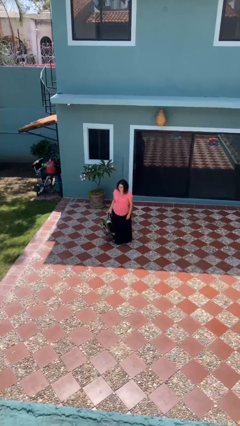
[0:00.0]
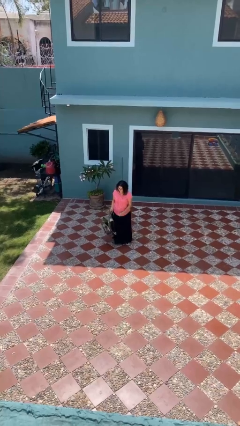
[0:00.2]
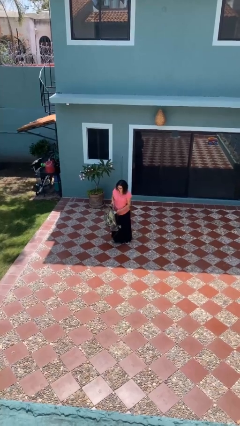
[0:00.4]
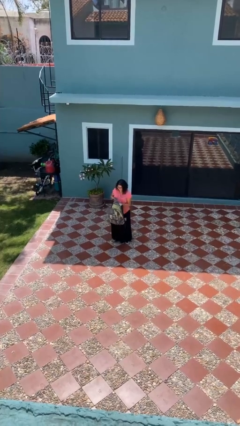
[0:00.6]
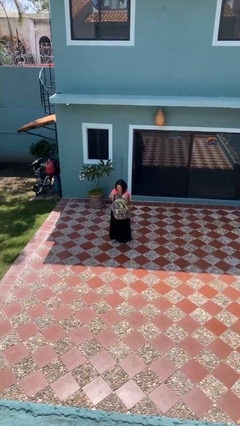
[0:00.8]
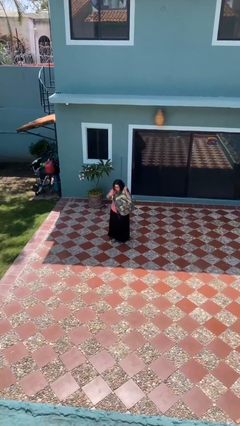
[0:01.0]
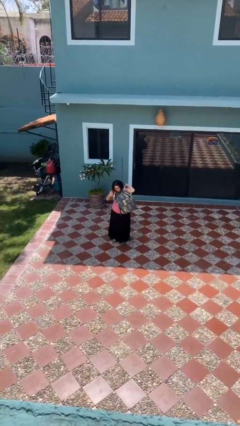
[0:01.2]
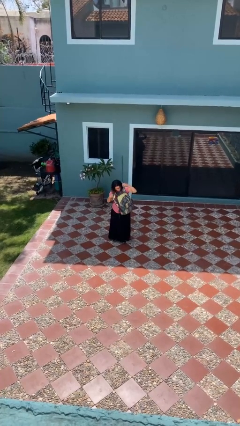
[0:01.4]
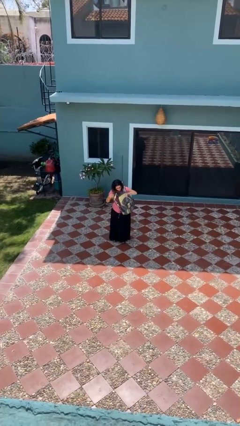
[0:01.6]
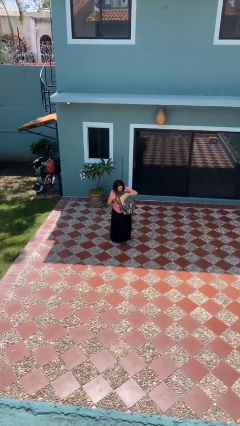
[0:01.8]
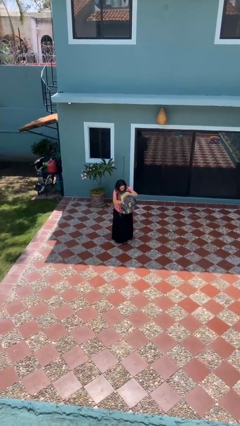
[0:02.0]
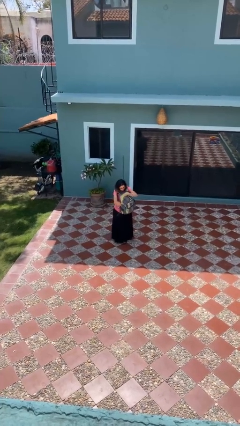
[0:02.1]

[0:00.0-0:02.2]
person searches in backpack

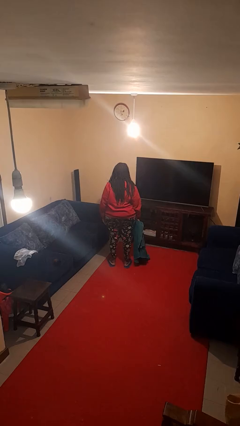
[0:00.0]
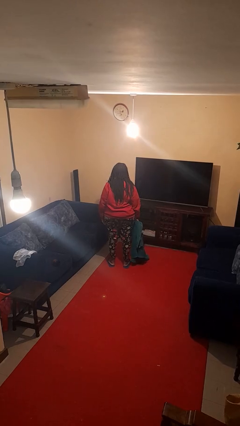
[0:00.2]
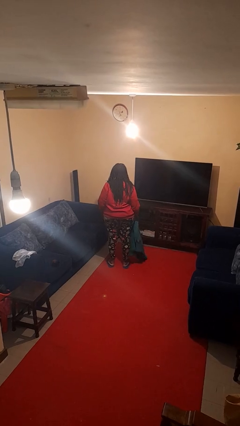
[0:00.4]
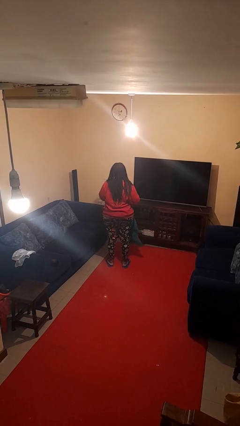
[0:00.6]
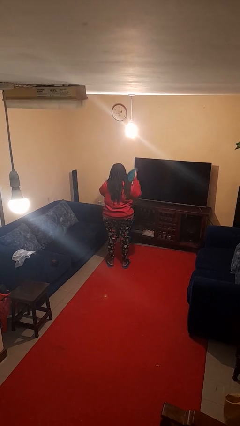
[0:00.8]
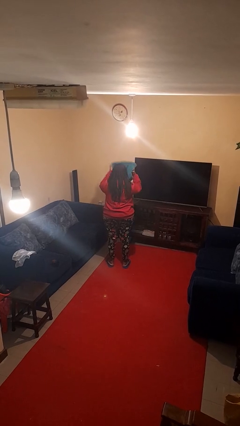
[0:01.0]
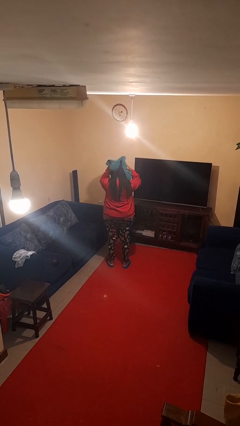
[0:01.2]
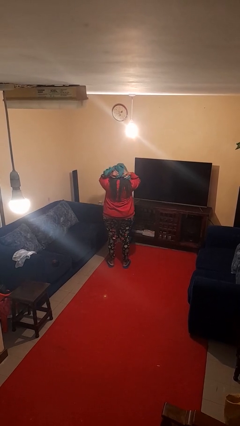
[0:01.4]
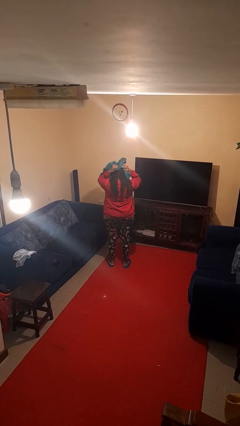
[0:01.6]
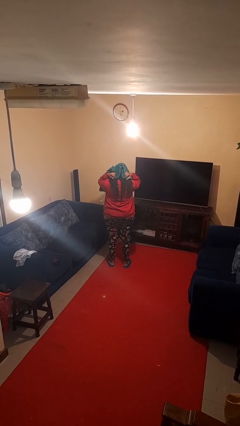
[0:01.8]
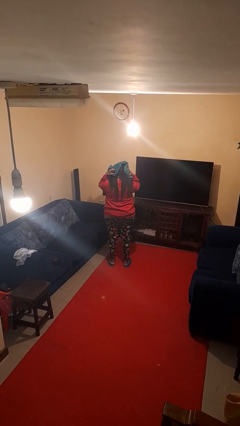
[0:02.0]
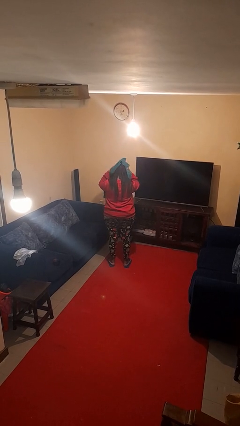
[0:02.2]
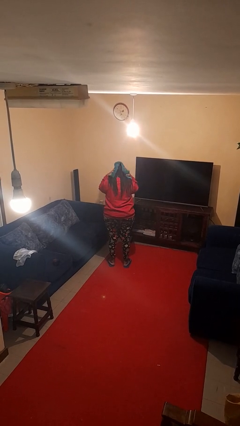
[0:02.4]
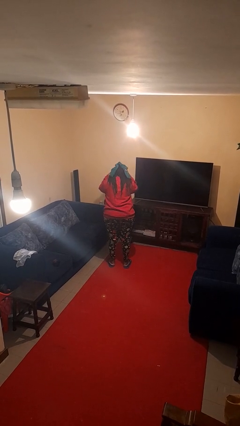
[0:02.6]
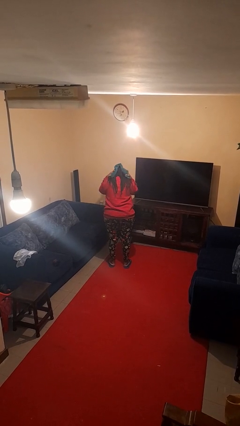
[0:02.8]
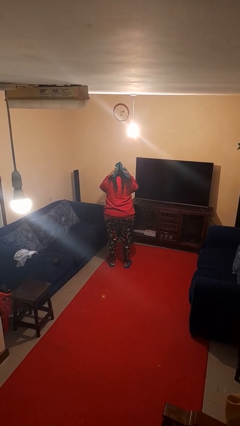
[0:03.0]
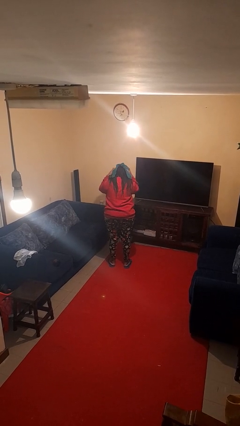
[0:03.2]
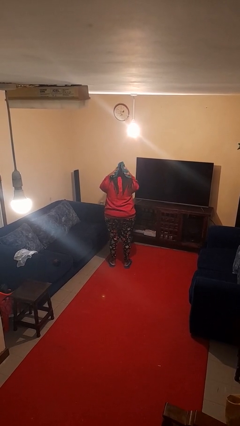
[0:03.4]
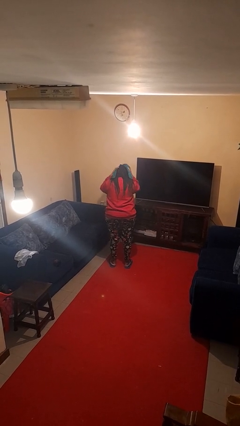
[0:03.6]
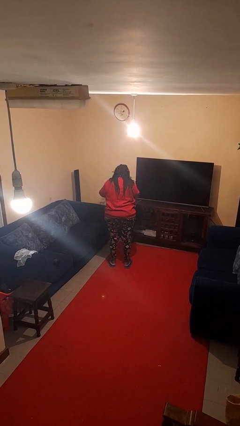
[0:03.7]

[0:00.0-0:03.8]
person dries hair with towel

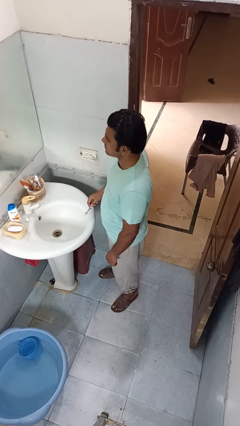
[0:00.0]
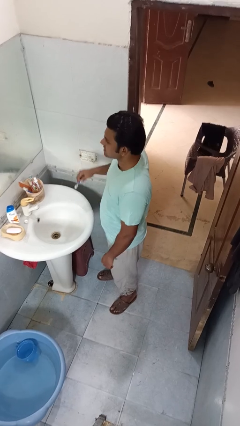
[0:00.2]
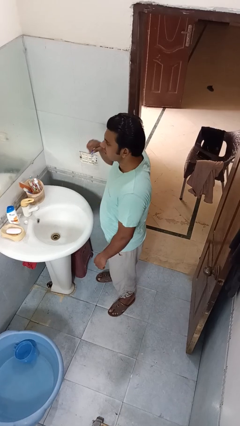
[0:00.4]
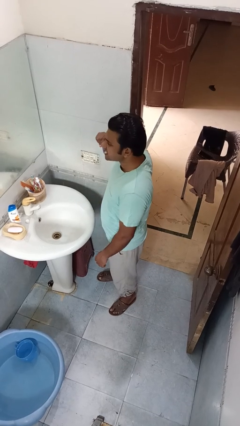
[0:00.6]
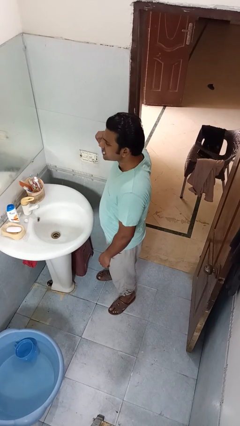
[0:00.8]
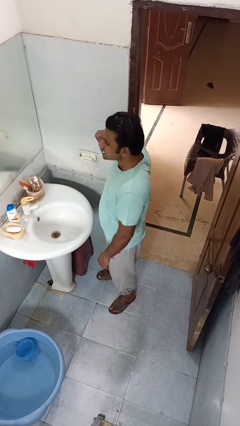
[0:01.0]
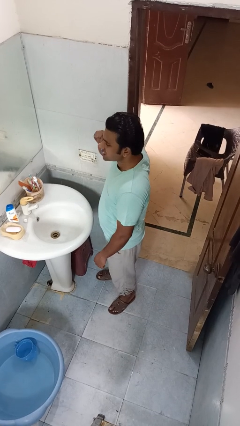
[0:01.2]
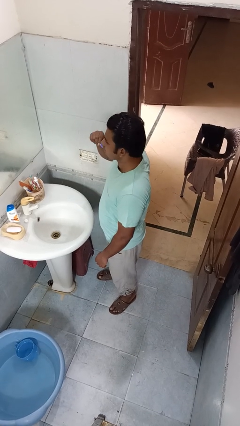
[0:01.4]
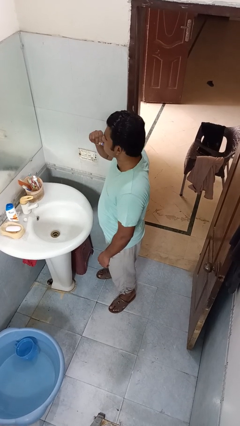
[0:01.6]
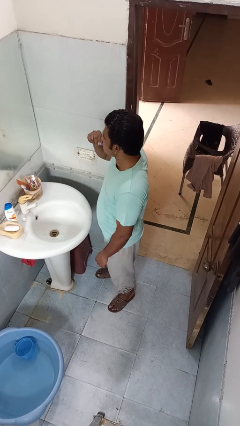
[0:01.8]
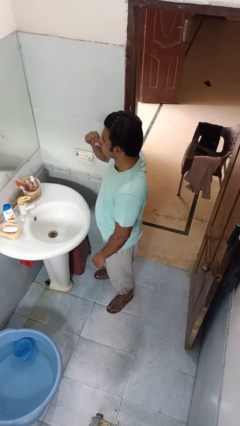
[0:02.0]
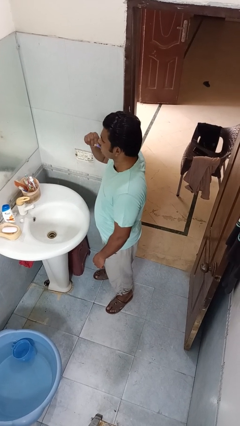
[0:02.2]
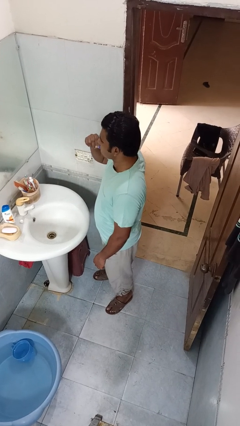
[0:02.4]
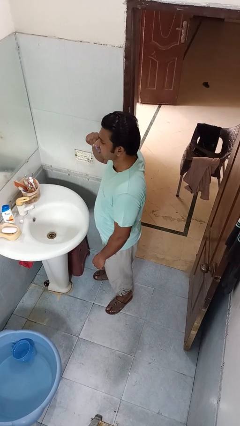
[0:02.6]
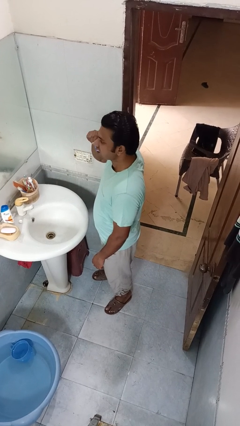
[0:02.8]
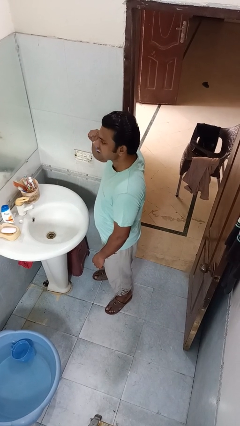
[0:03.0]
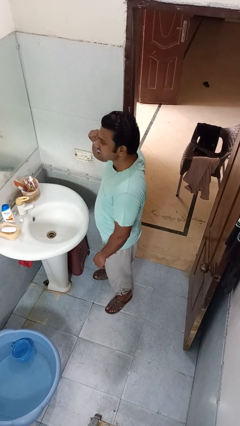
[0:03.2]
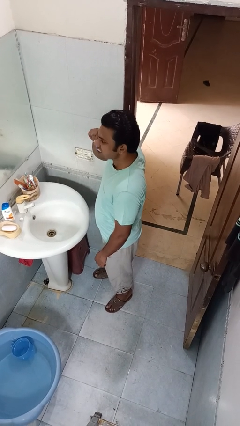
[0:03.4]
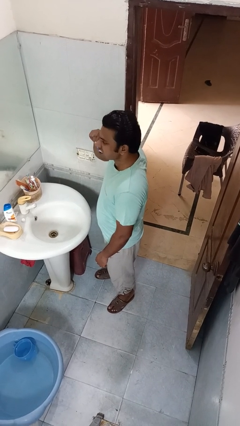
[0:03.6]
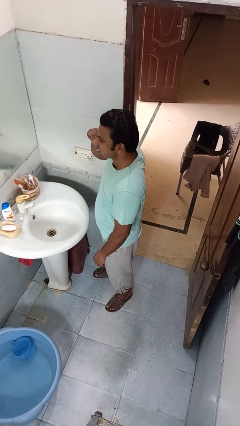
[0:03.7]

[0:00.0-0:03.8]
person brushes teeth

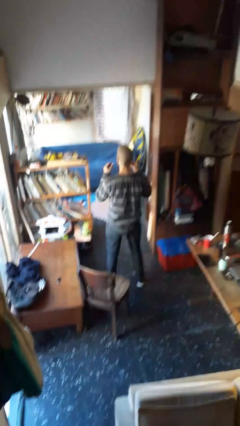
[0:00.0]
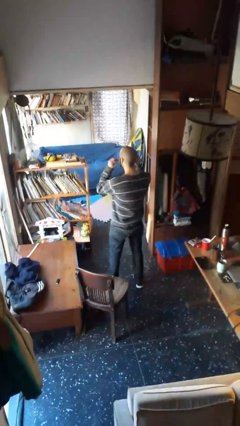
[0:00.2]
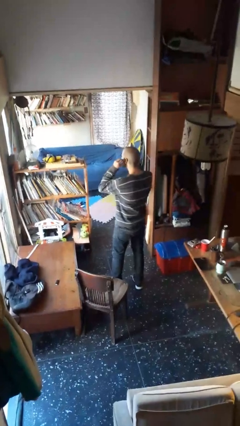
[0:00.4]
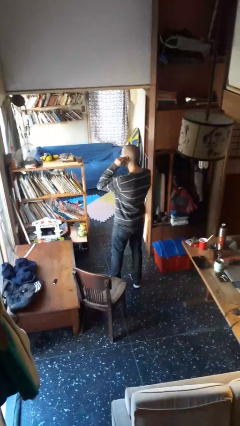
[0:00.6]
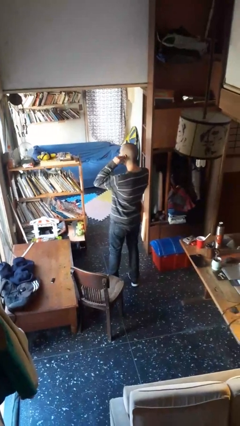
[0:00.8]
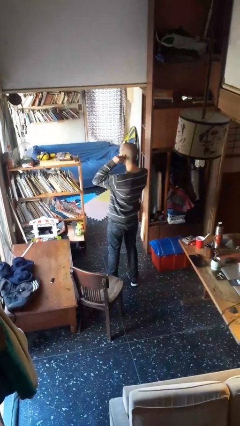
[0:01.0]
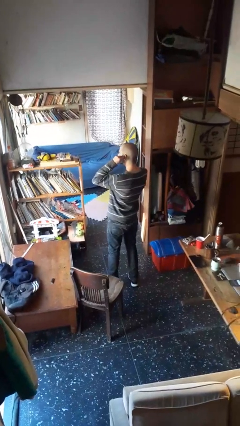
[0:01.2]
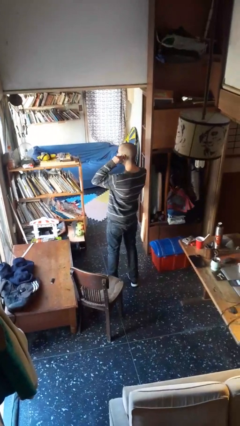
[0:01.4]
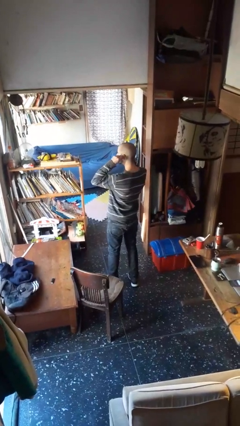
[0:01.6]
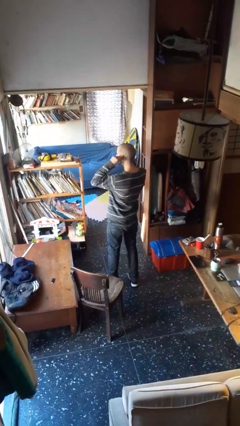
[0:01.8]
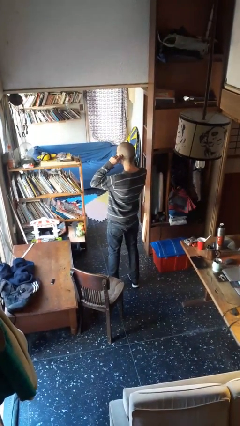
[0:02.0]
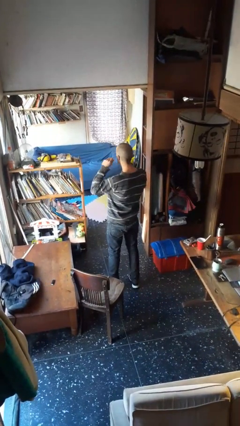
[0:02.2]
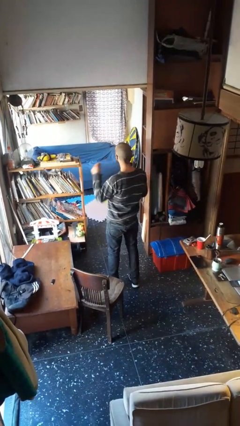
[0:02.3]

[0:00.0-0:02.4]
person puts on headphones

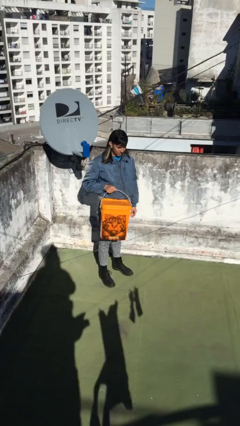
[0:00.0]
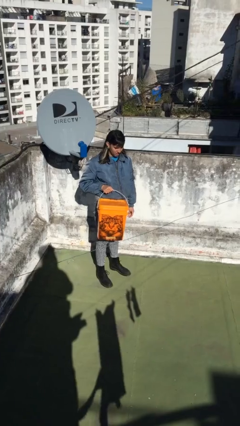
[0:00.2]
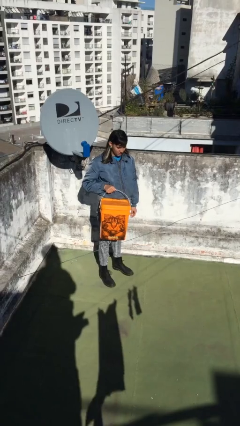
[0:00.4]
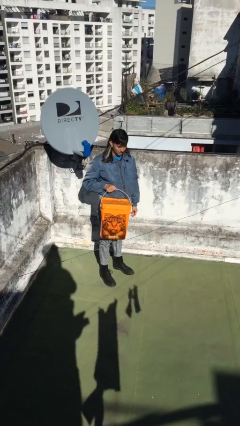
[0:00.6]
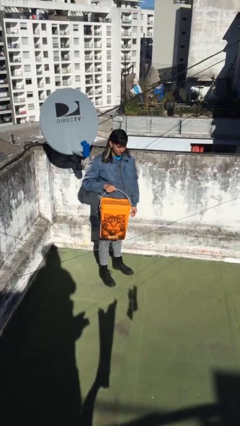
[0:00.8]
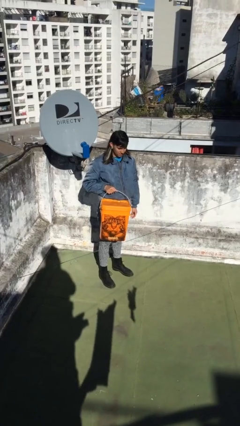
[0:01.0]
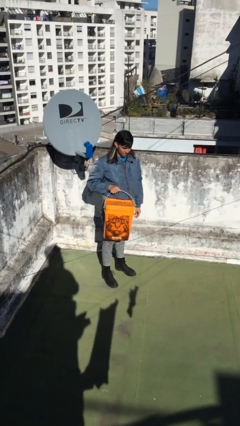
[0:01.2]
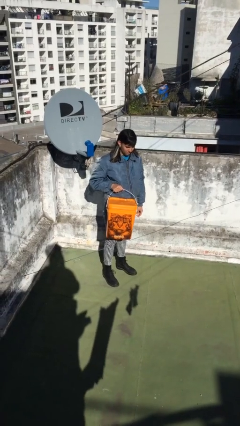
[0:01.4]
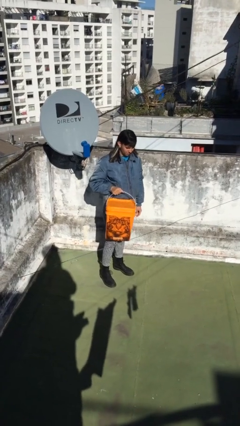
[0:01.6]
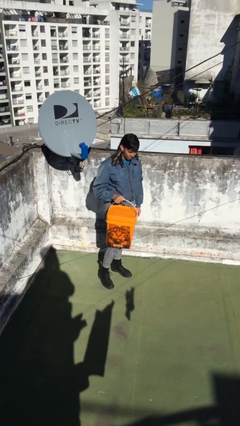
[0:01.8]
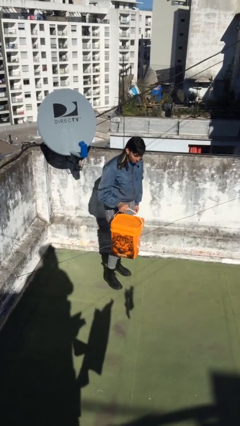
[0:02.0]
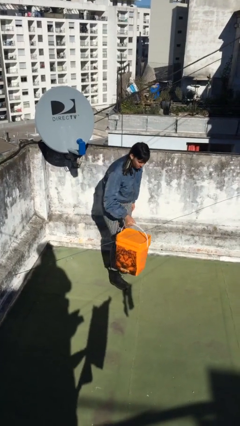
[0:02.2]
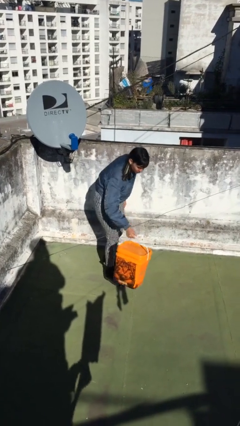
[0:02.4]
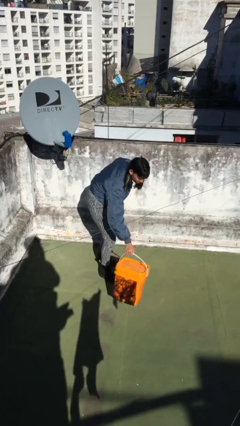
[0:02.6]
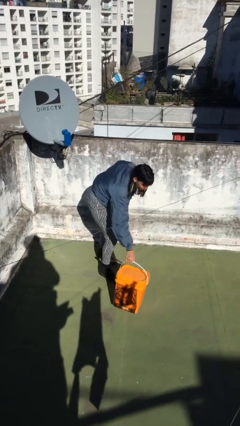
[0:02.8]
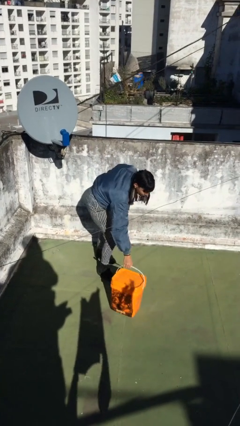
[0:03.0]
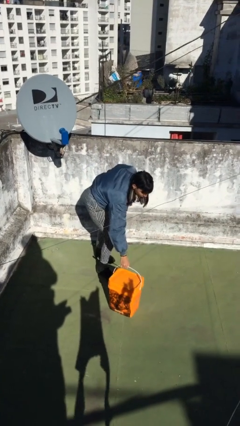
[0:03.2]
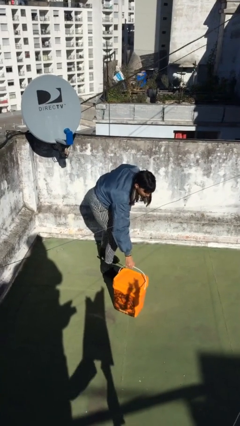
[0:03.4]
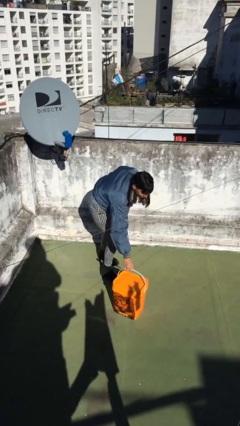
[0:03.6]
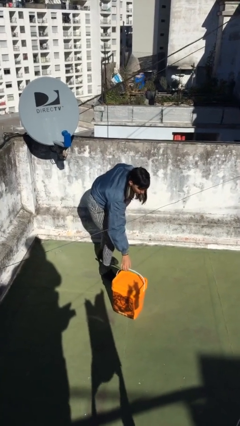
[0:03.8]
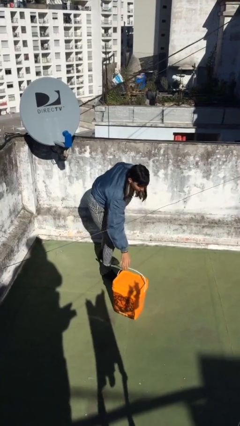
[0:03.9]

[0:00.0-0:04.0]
person puts down object on floor

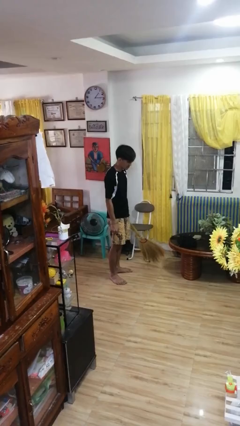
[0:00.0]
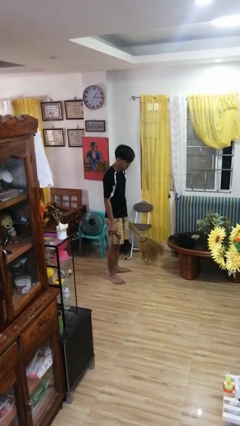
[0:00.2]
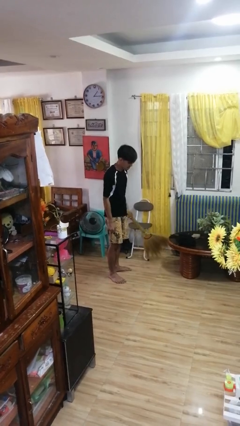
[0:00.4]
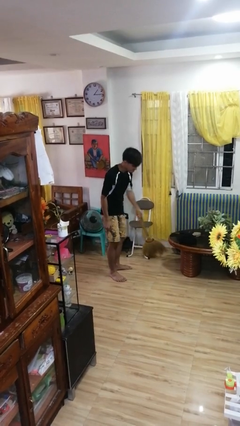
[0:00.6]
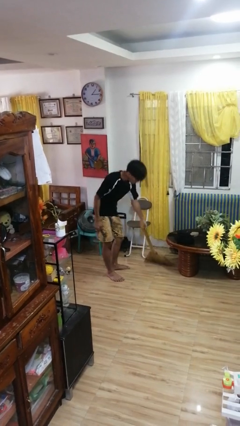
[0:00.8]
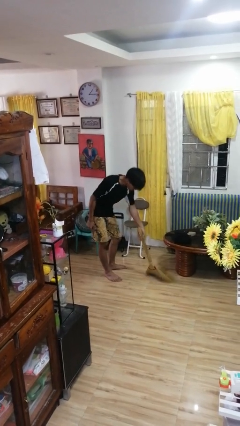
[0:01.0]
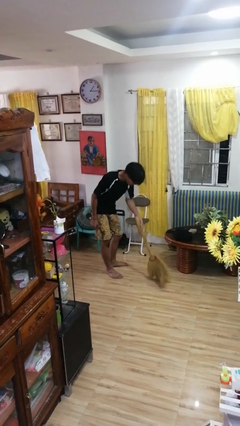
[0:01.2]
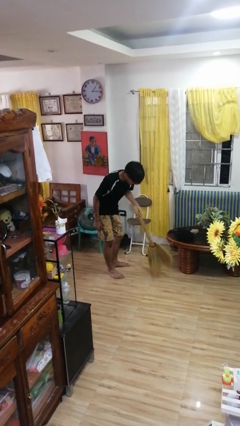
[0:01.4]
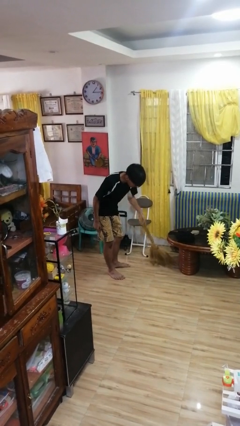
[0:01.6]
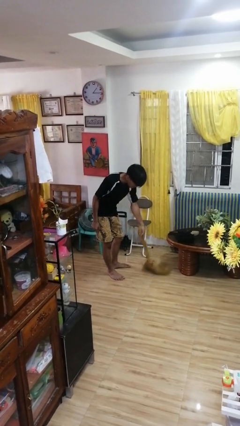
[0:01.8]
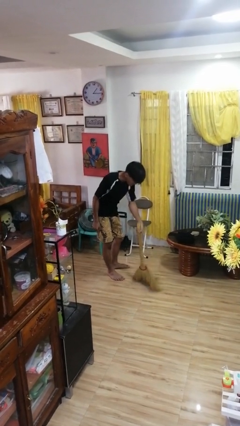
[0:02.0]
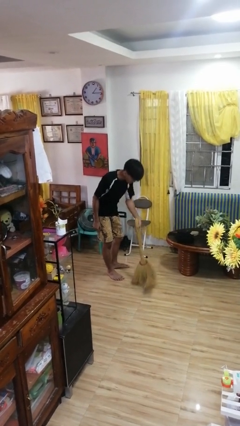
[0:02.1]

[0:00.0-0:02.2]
person sweeps floor
